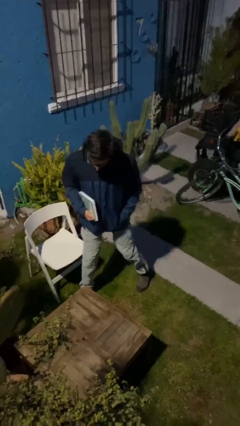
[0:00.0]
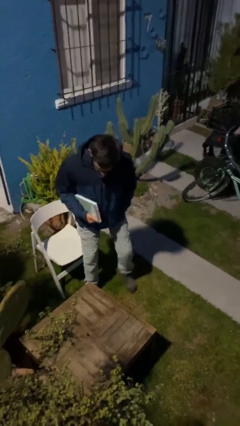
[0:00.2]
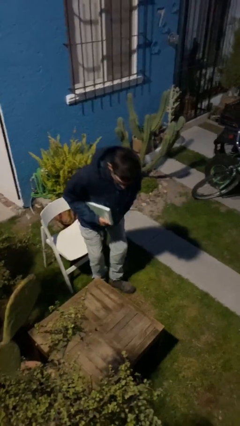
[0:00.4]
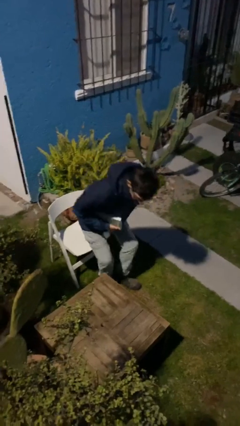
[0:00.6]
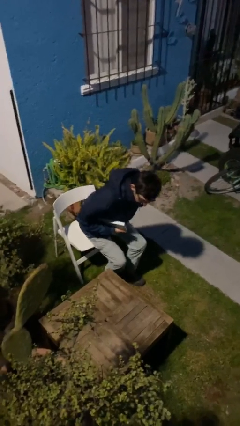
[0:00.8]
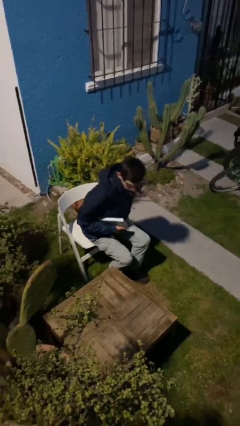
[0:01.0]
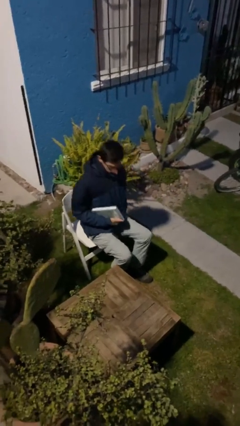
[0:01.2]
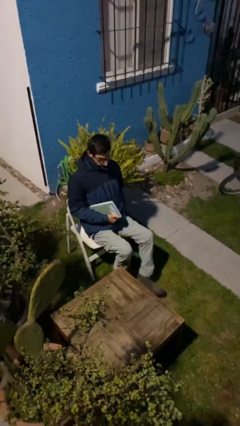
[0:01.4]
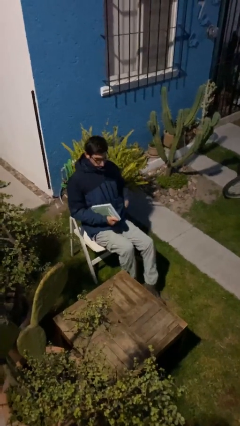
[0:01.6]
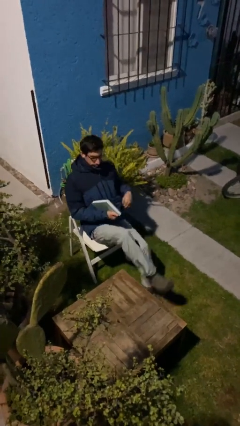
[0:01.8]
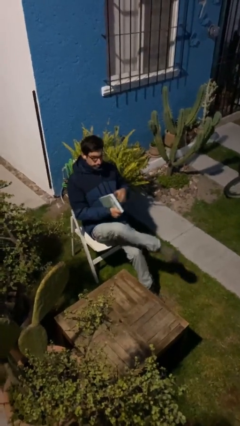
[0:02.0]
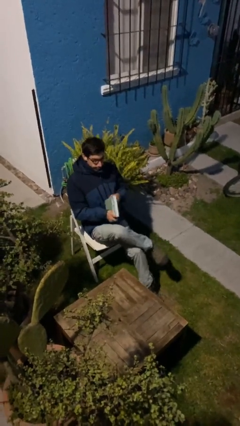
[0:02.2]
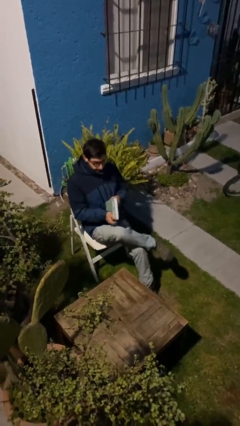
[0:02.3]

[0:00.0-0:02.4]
person sits down

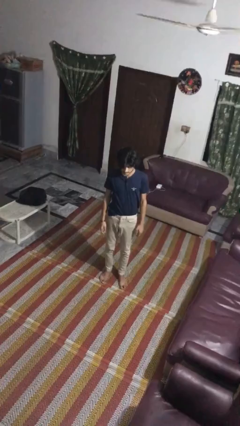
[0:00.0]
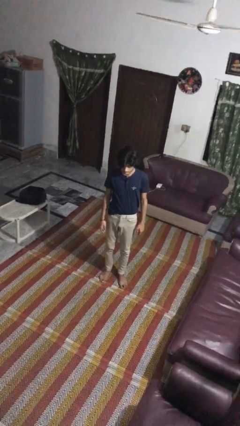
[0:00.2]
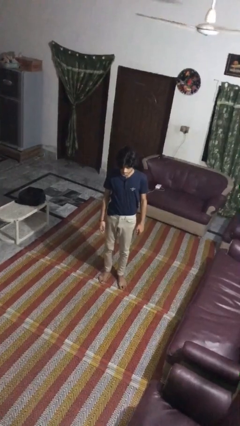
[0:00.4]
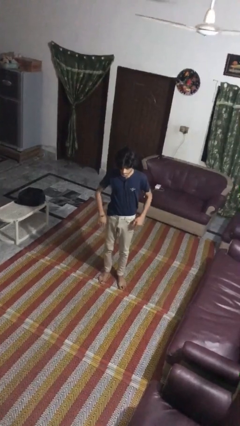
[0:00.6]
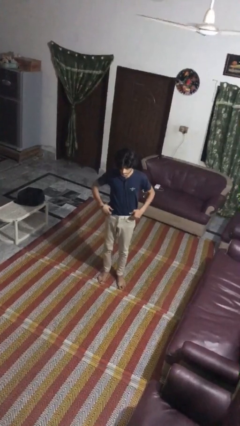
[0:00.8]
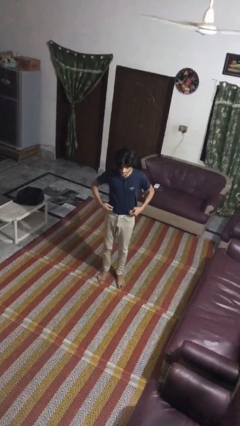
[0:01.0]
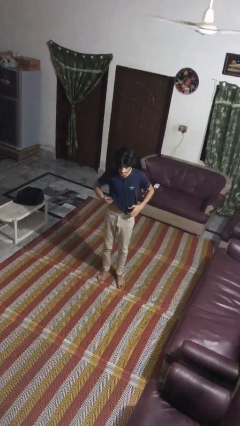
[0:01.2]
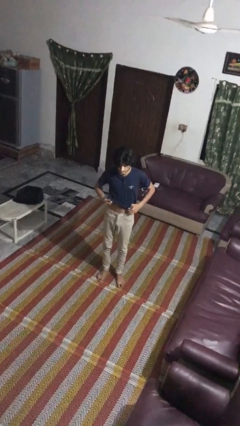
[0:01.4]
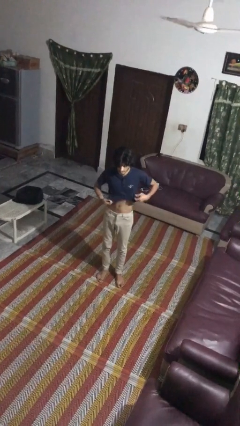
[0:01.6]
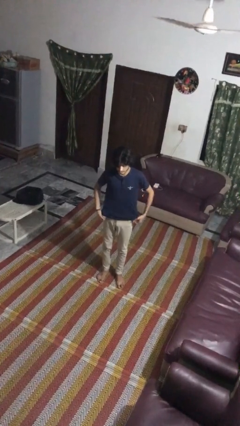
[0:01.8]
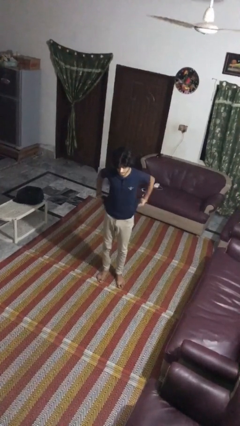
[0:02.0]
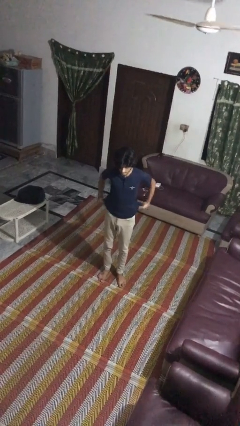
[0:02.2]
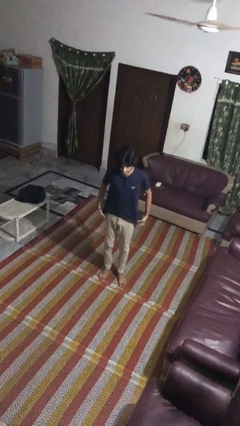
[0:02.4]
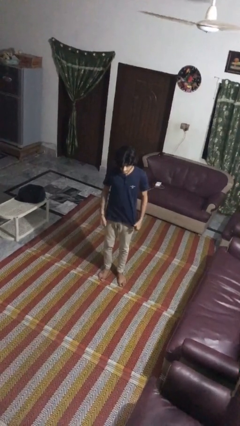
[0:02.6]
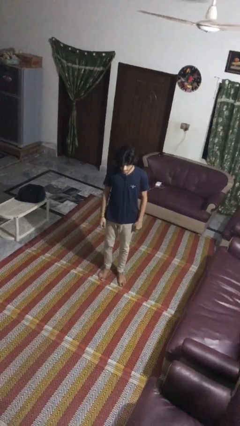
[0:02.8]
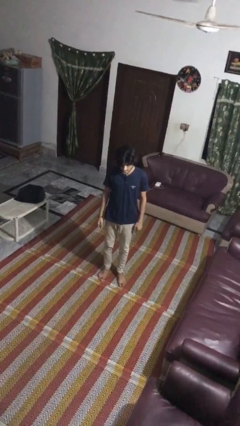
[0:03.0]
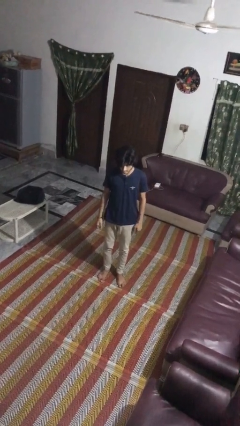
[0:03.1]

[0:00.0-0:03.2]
person untucks shirt

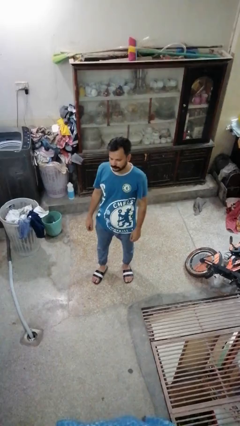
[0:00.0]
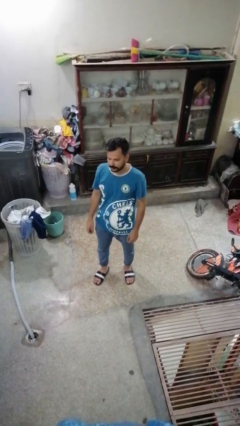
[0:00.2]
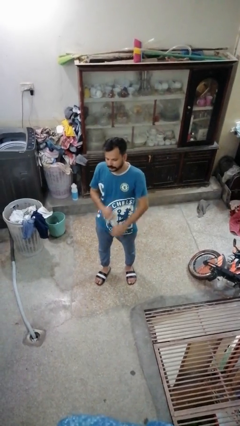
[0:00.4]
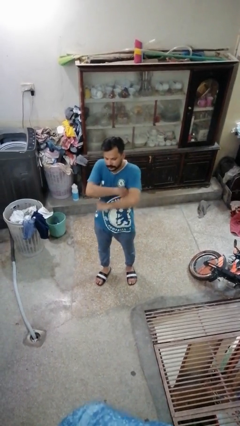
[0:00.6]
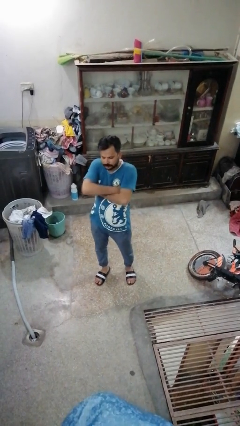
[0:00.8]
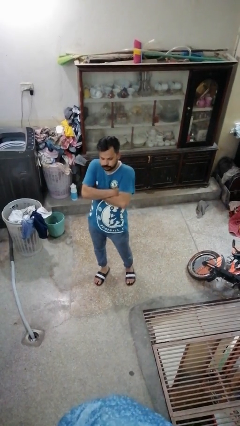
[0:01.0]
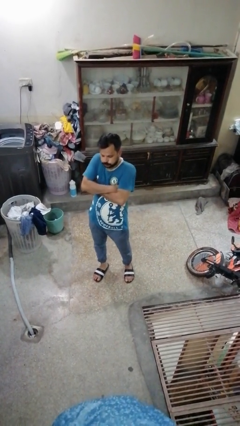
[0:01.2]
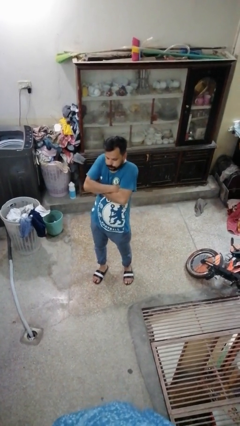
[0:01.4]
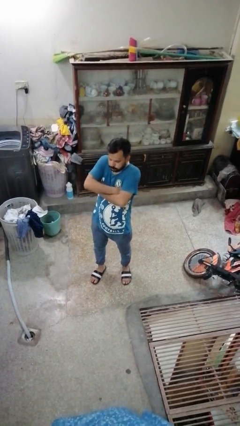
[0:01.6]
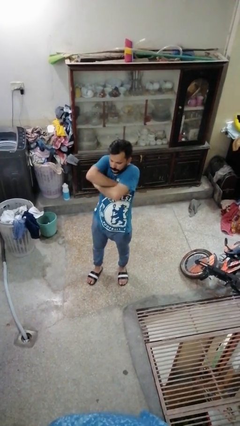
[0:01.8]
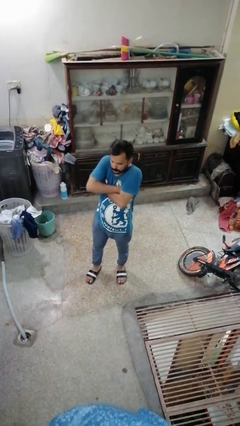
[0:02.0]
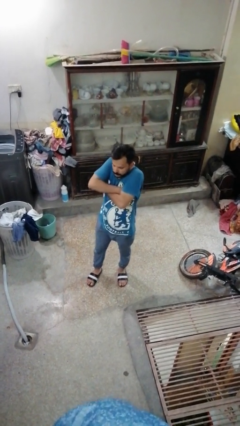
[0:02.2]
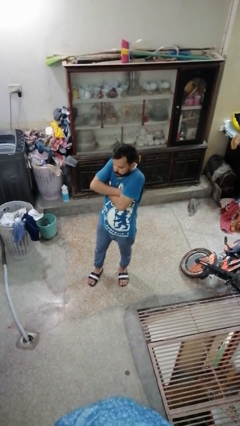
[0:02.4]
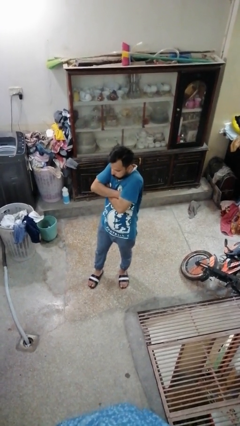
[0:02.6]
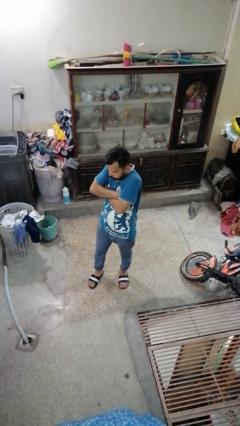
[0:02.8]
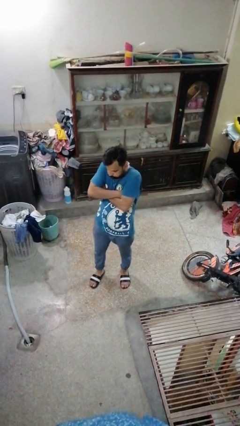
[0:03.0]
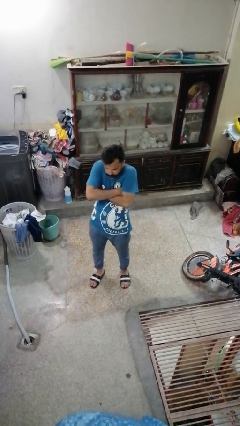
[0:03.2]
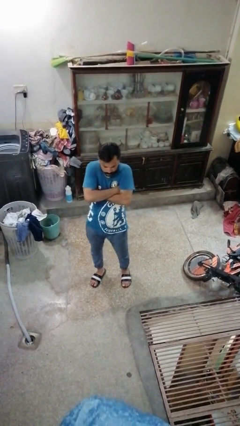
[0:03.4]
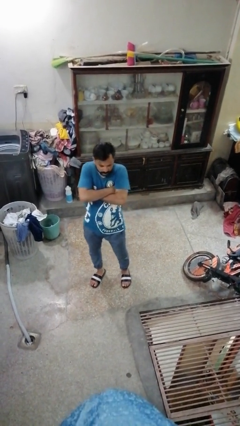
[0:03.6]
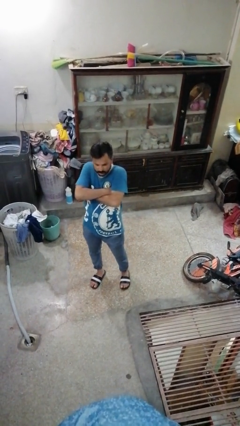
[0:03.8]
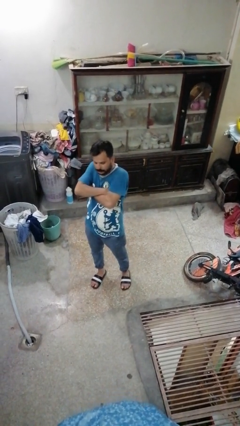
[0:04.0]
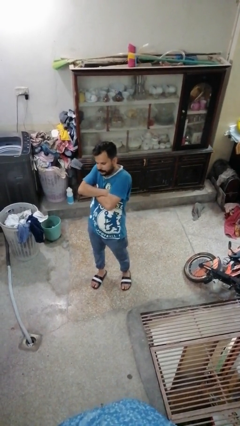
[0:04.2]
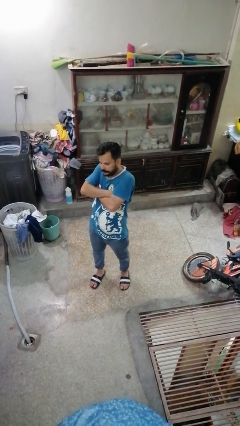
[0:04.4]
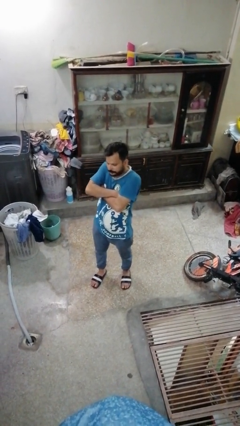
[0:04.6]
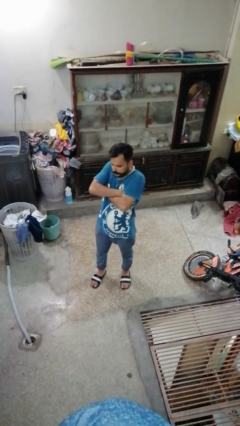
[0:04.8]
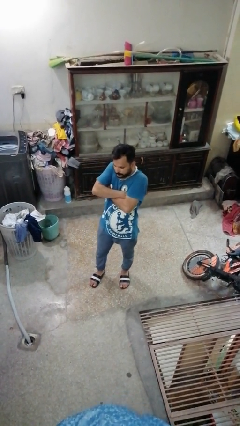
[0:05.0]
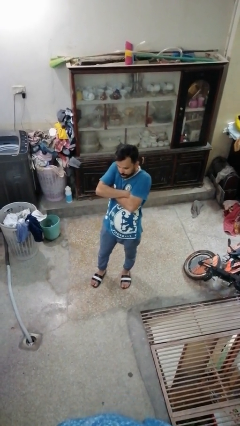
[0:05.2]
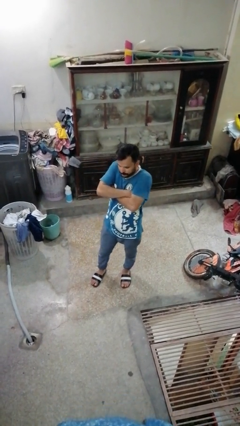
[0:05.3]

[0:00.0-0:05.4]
person blows into hands

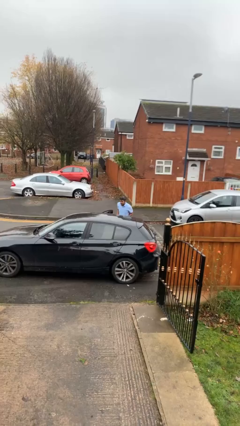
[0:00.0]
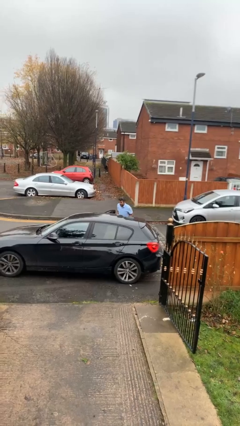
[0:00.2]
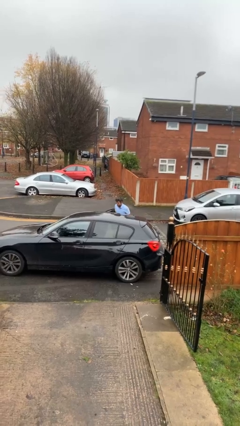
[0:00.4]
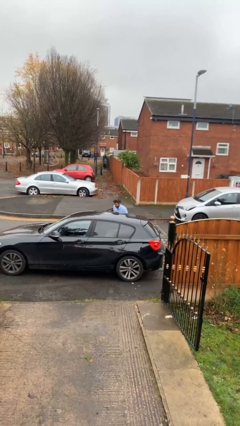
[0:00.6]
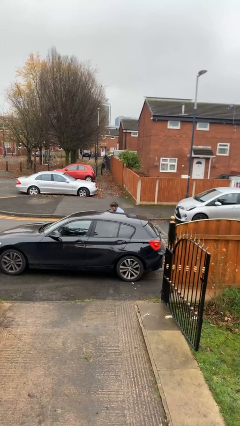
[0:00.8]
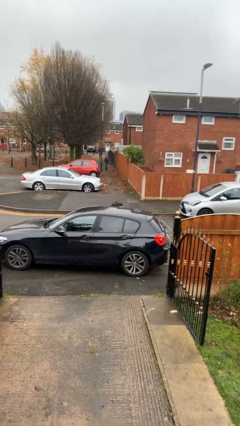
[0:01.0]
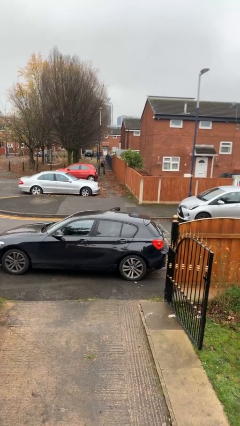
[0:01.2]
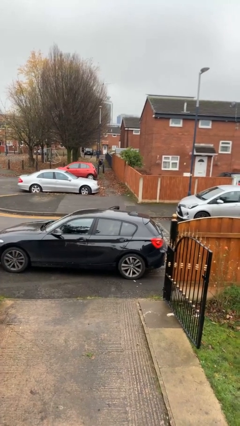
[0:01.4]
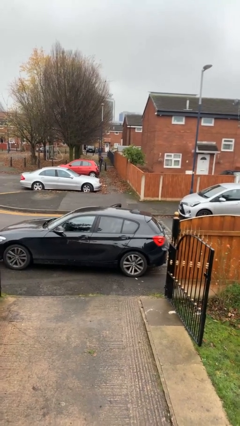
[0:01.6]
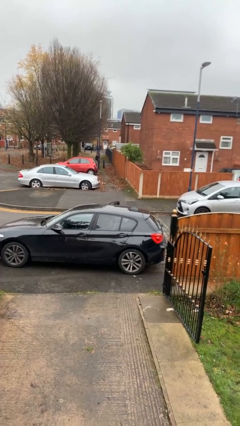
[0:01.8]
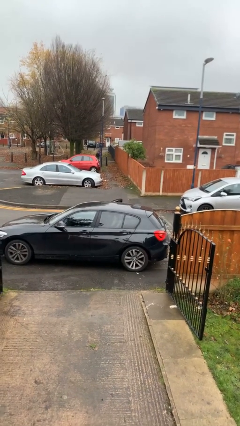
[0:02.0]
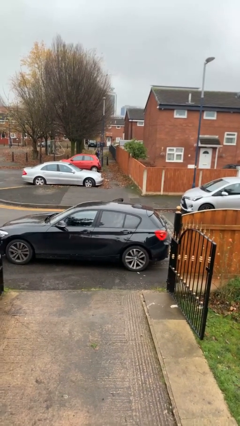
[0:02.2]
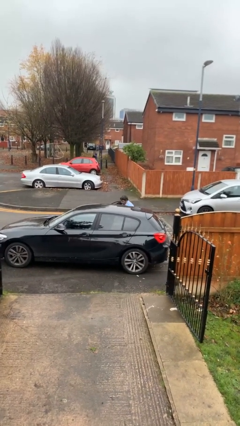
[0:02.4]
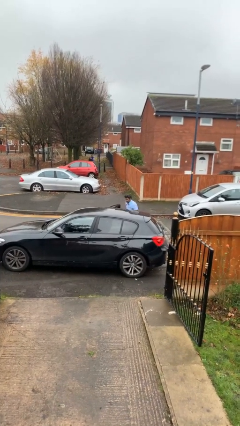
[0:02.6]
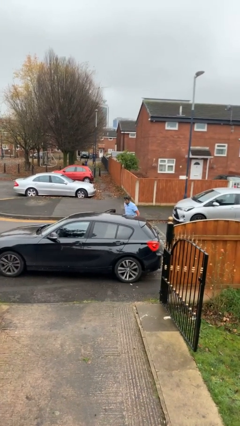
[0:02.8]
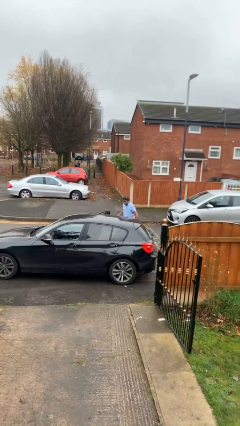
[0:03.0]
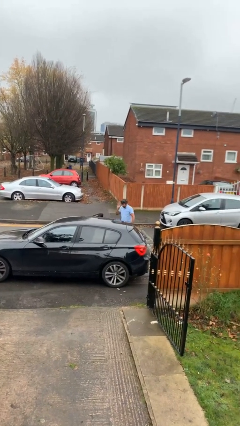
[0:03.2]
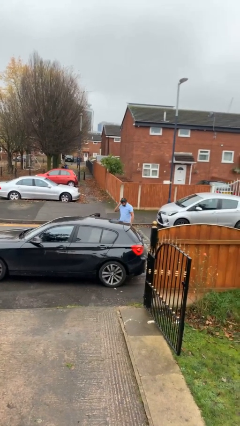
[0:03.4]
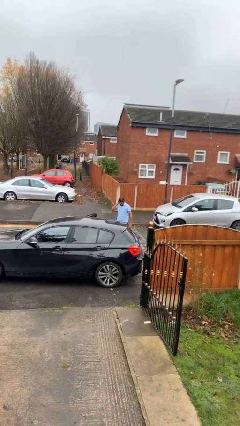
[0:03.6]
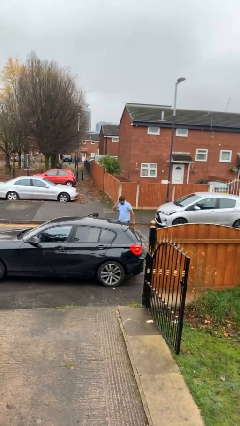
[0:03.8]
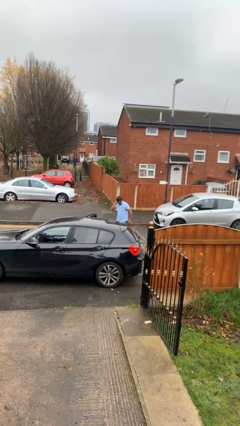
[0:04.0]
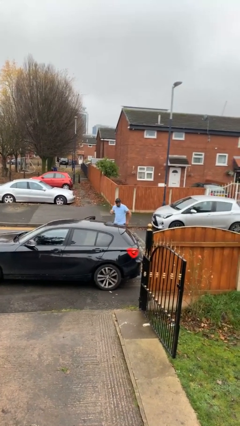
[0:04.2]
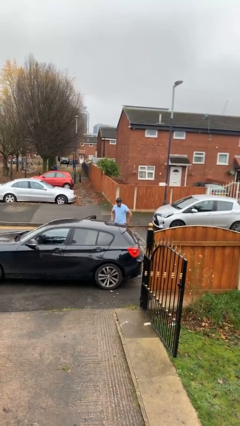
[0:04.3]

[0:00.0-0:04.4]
person loads car

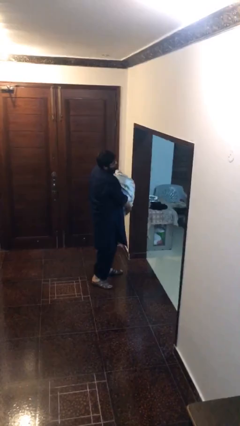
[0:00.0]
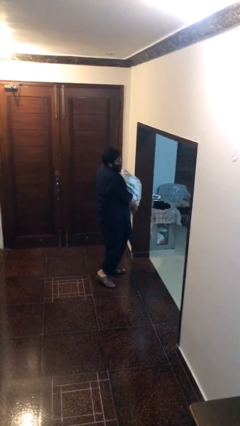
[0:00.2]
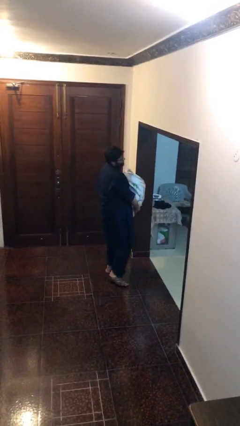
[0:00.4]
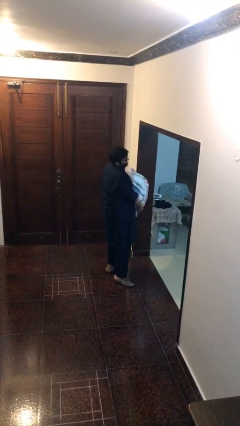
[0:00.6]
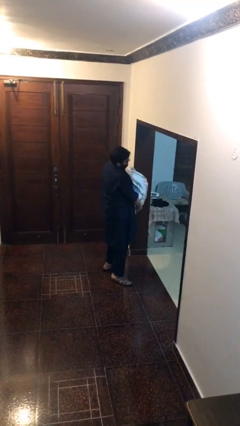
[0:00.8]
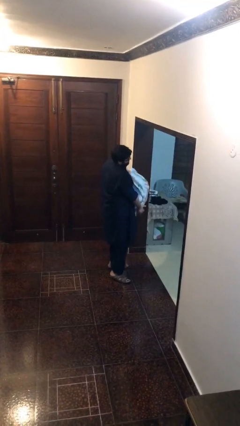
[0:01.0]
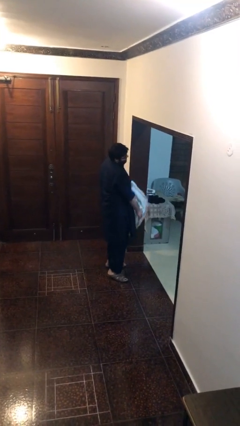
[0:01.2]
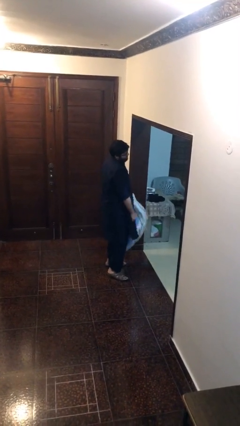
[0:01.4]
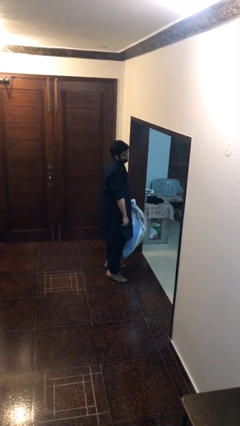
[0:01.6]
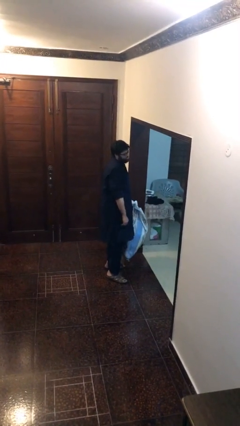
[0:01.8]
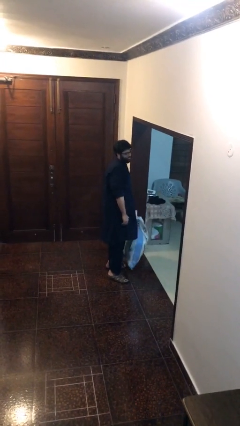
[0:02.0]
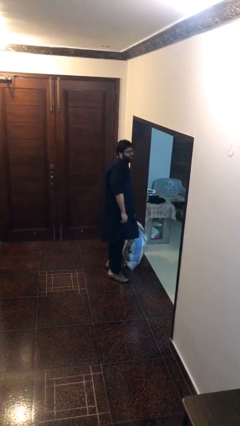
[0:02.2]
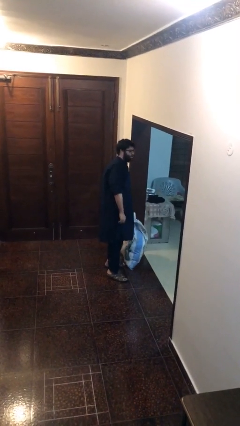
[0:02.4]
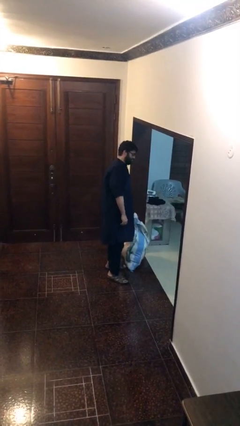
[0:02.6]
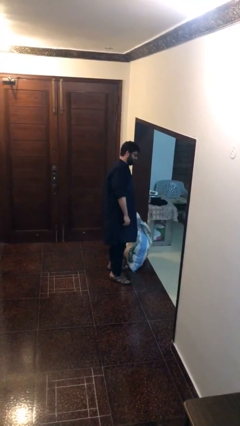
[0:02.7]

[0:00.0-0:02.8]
person puts down object on floor
